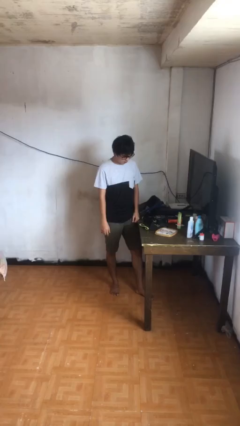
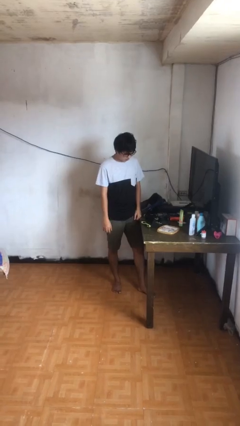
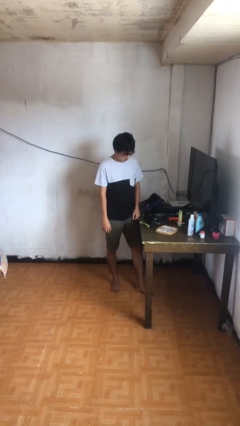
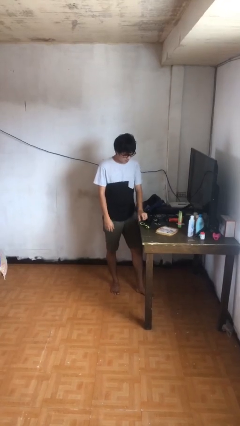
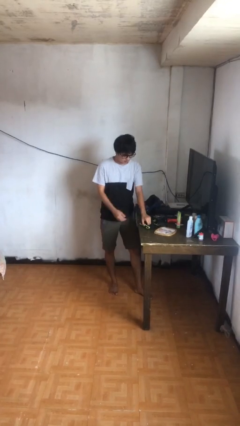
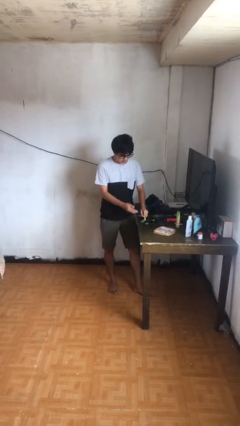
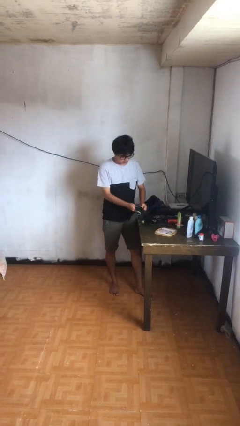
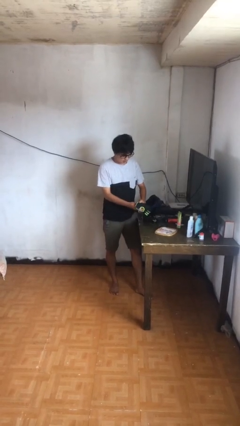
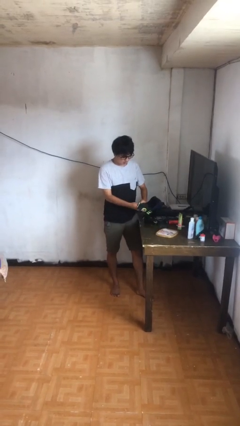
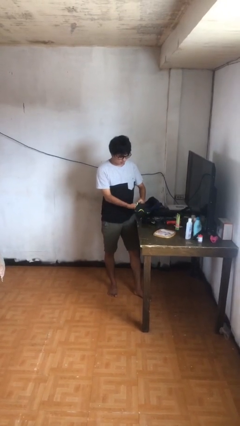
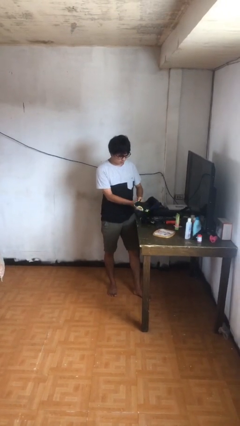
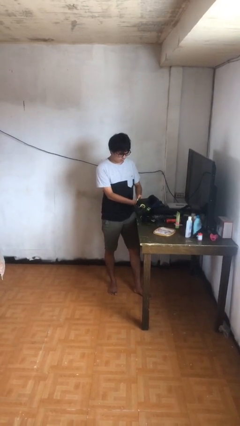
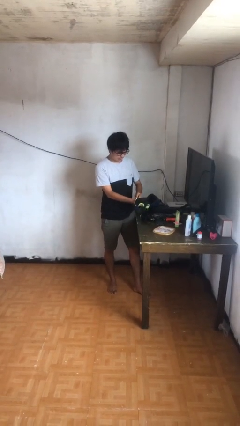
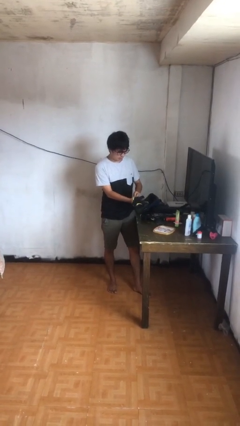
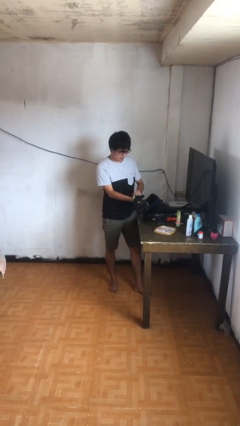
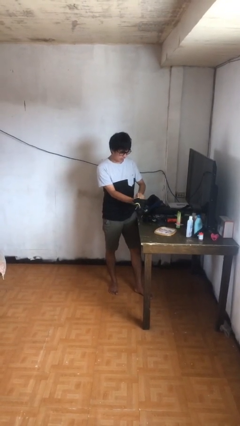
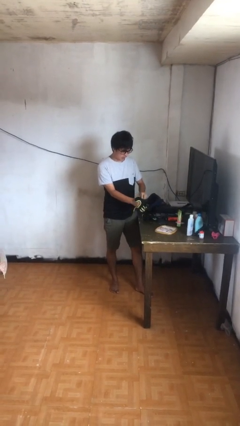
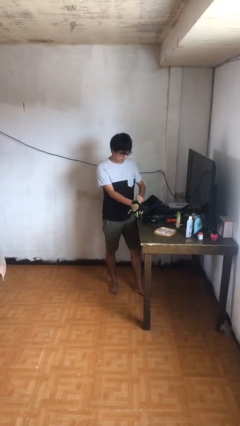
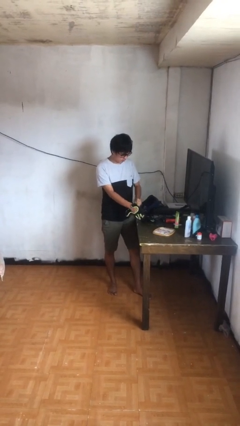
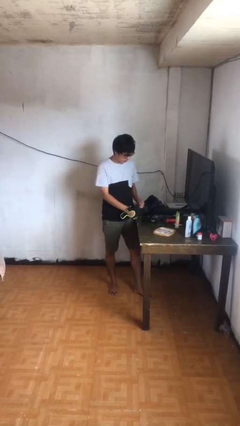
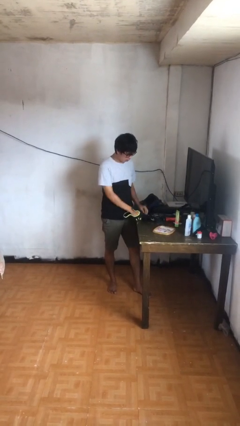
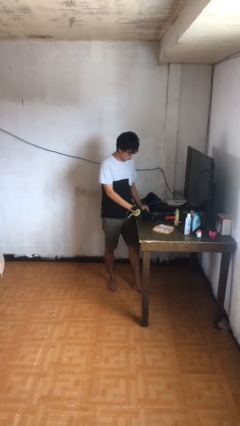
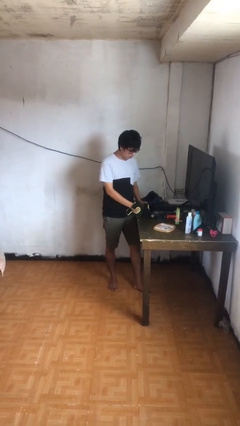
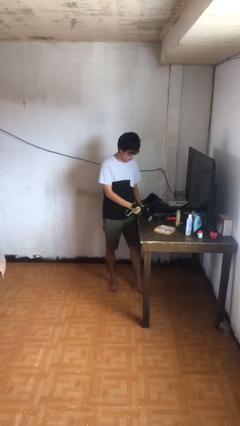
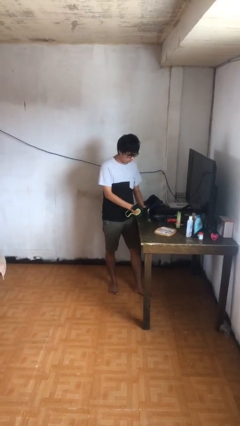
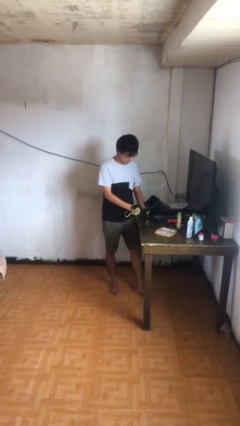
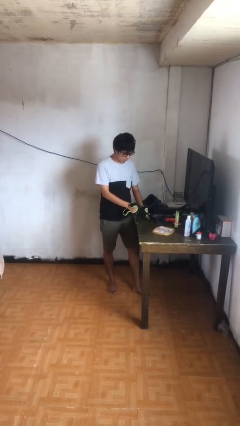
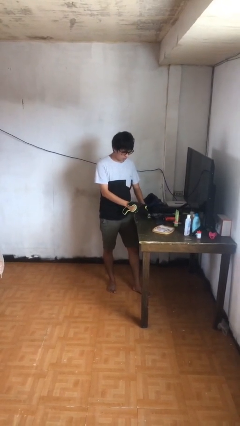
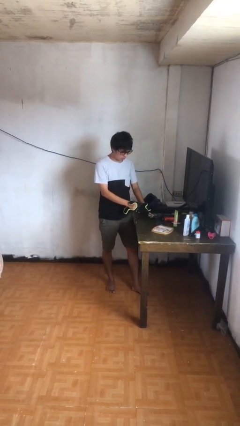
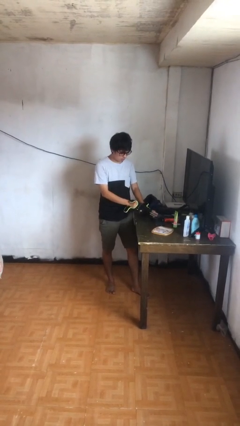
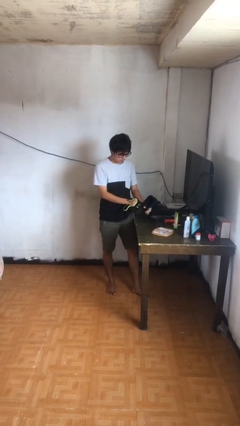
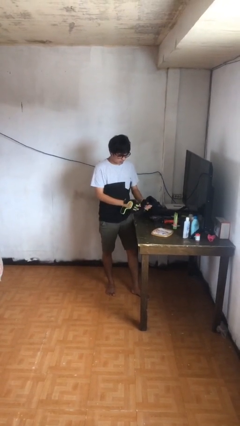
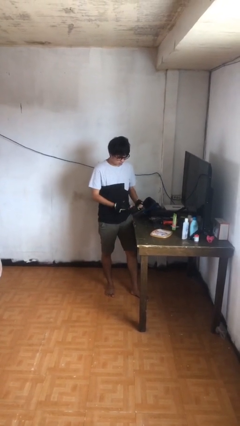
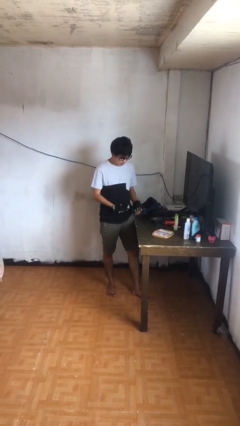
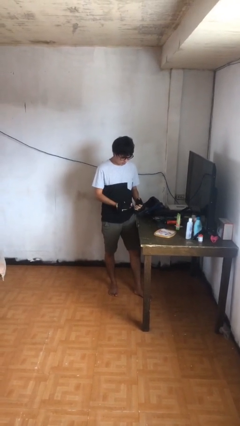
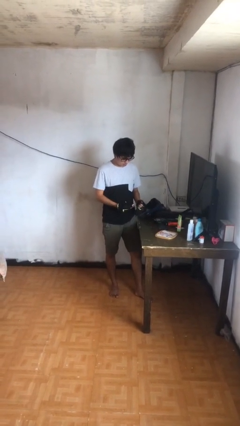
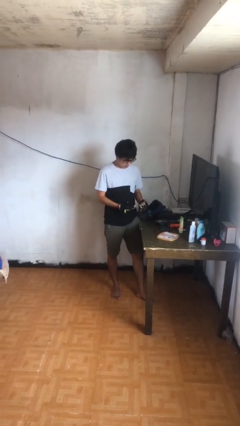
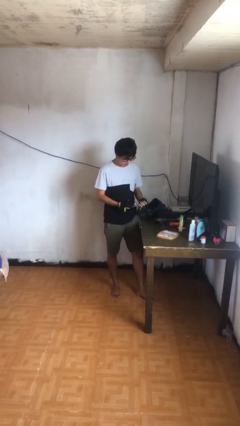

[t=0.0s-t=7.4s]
person puts on gloves

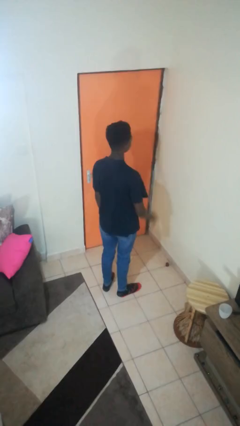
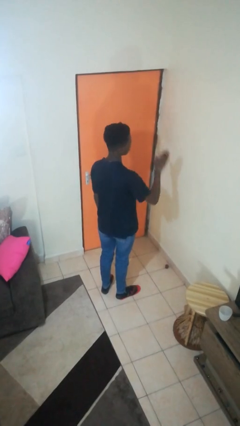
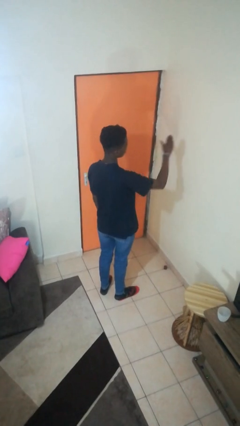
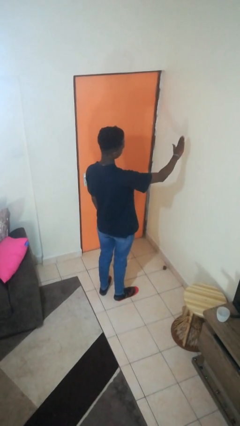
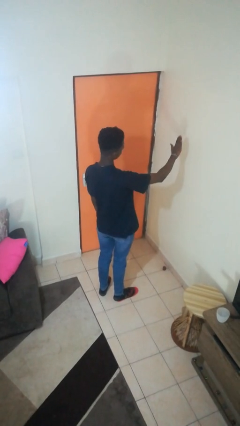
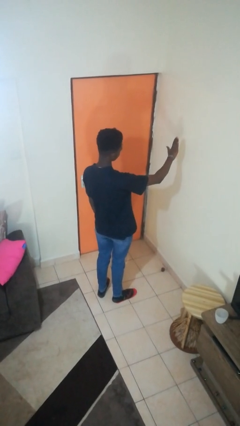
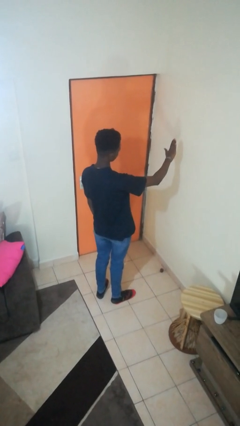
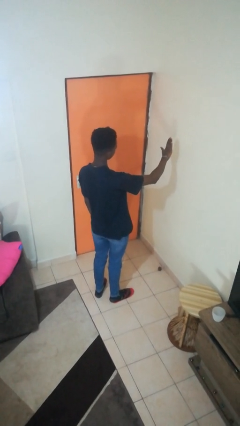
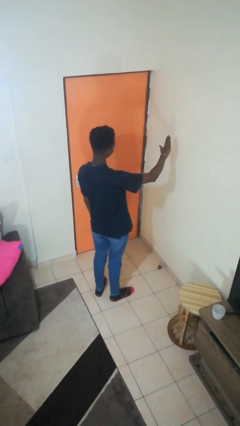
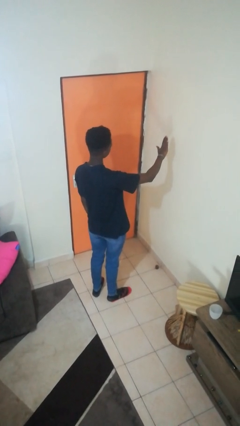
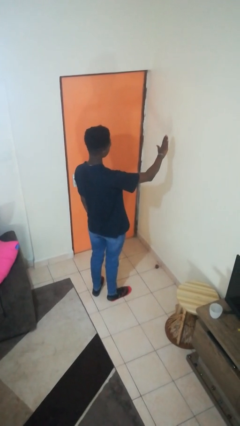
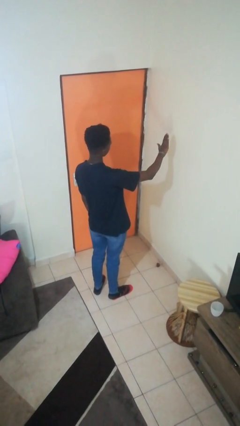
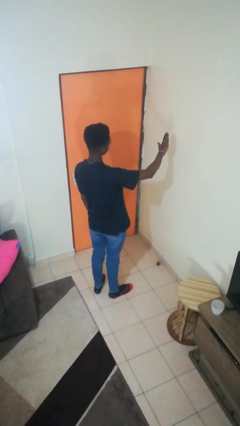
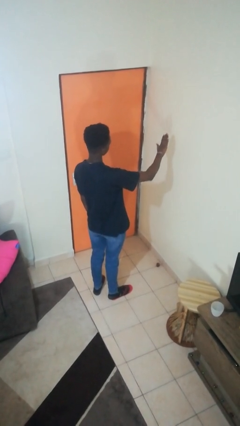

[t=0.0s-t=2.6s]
person gestures stop

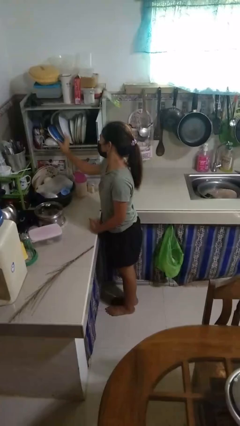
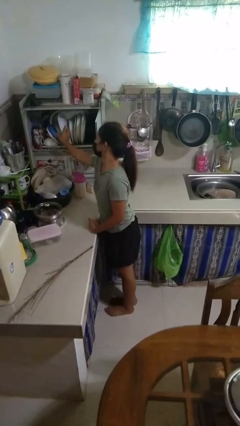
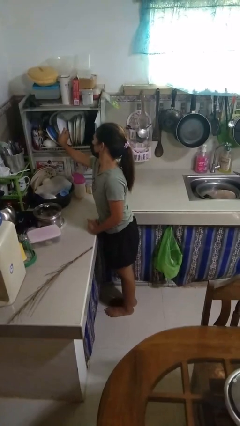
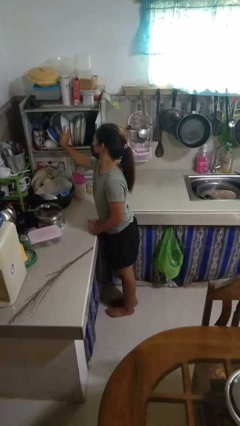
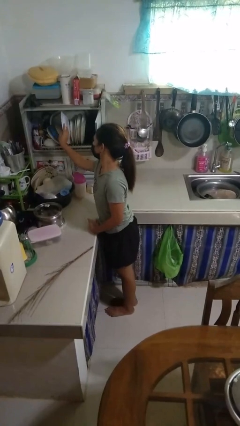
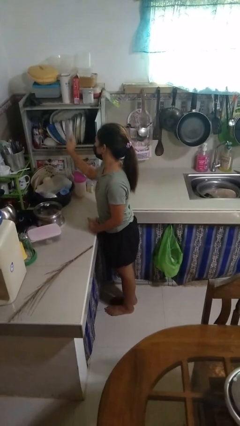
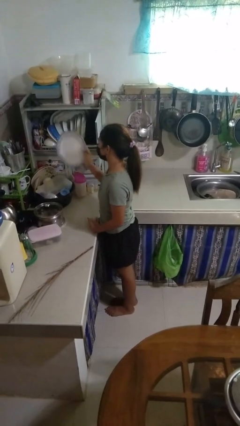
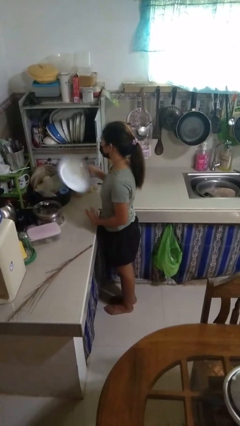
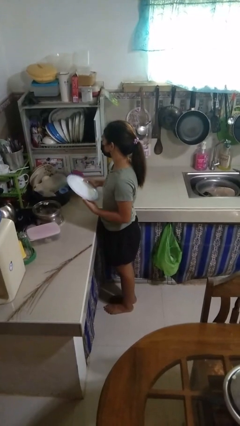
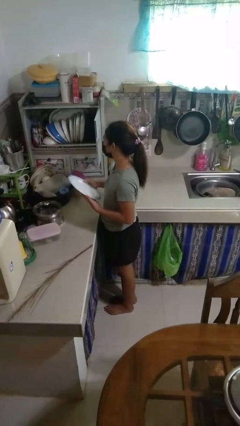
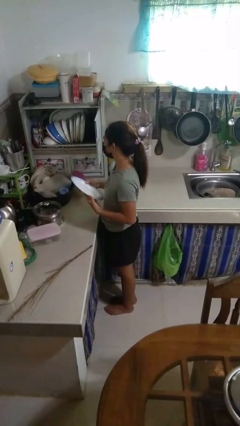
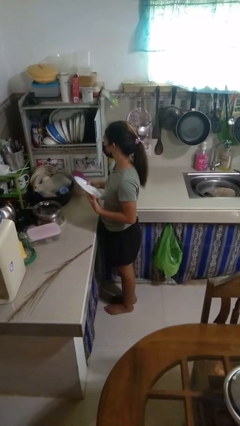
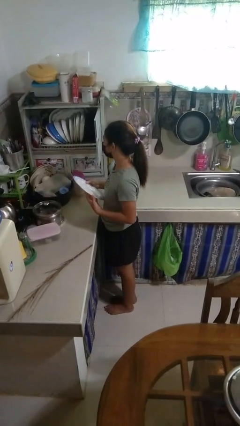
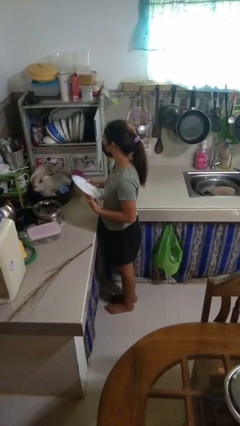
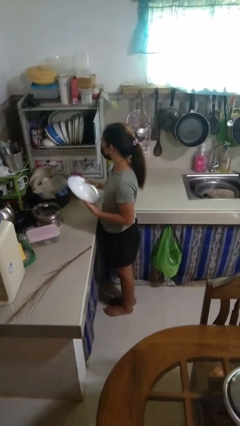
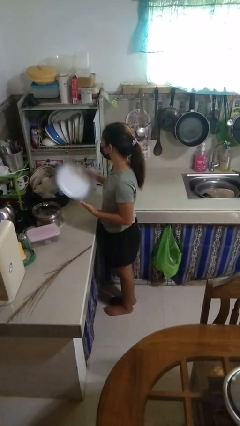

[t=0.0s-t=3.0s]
person takes object from kitchen drawer

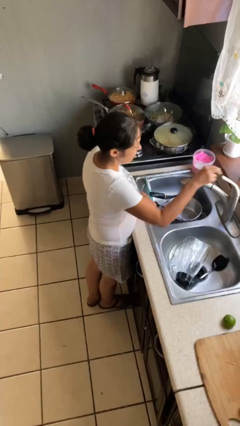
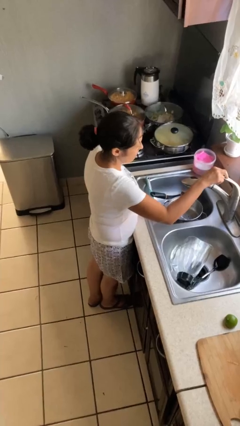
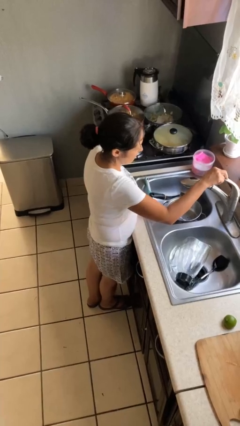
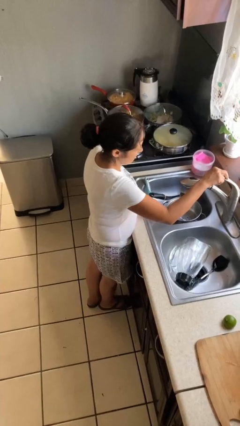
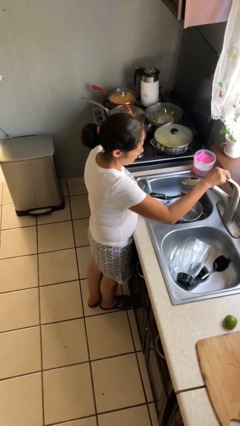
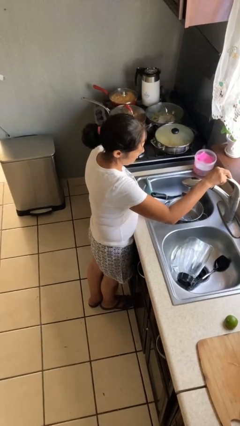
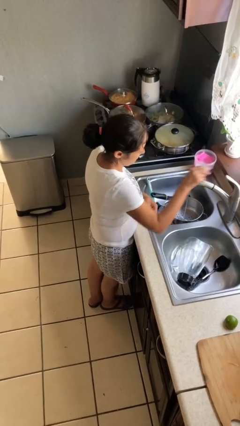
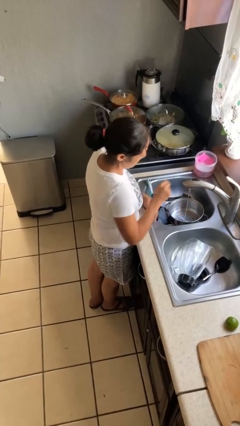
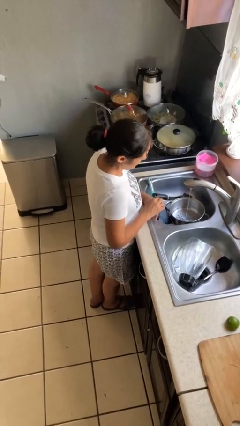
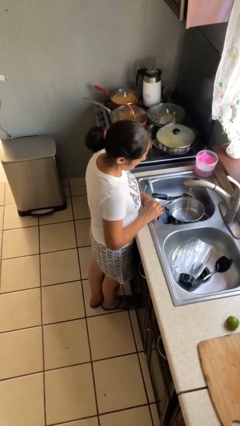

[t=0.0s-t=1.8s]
person turns on faucet

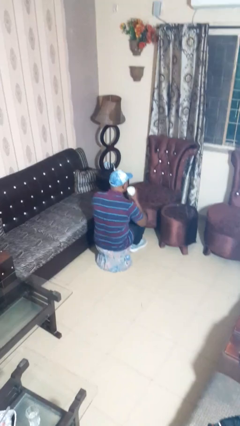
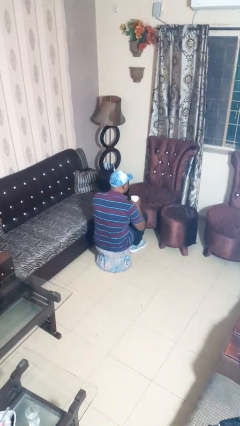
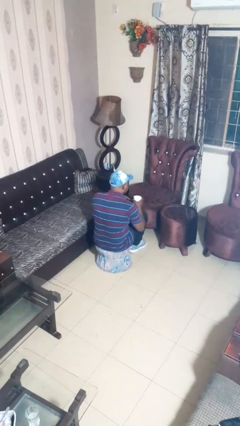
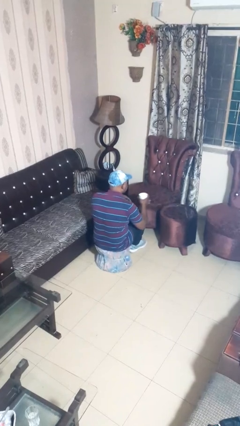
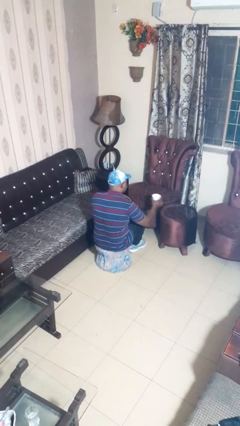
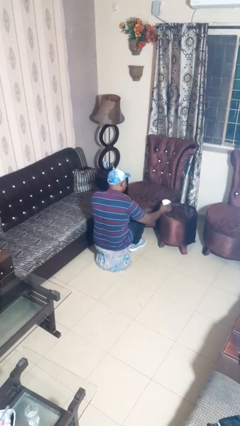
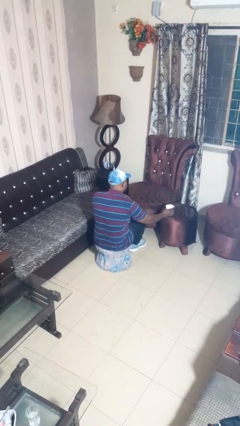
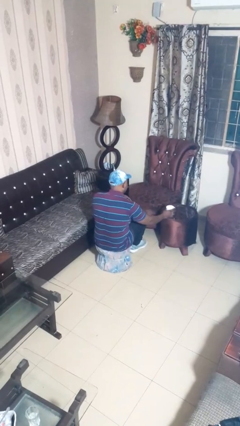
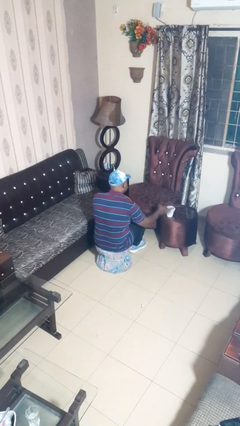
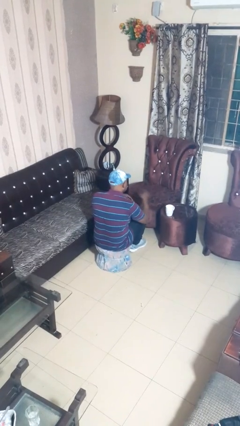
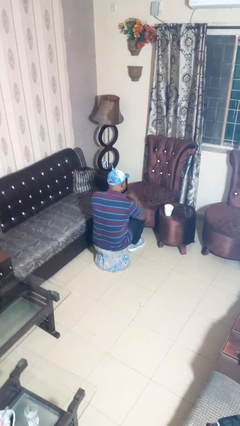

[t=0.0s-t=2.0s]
person puts down object on table

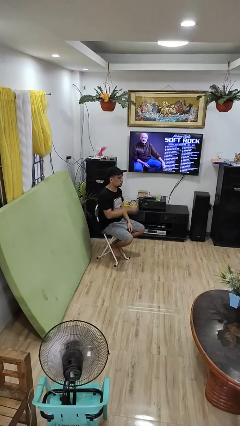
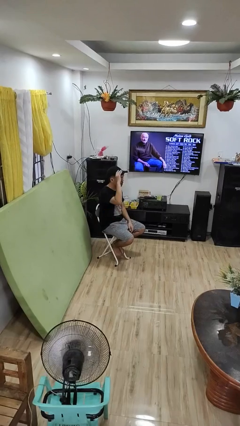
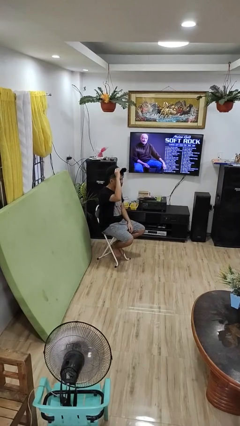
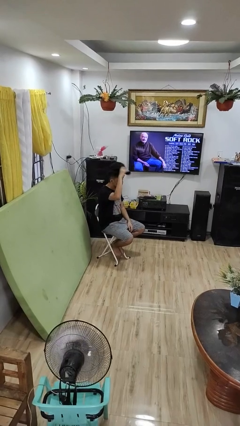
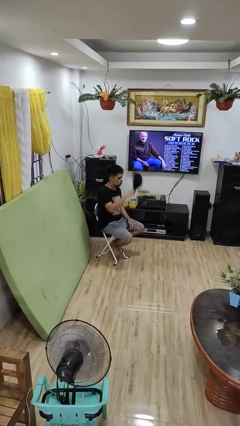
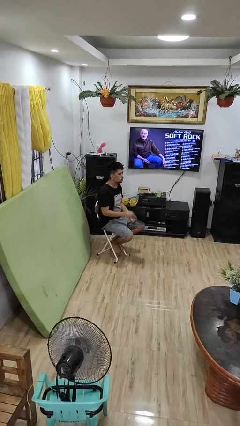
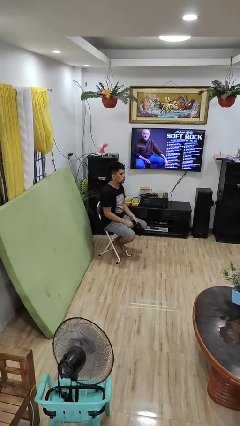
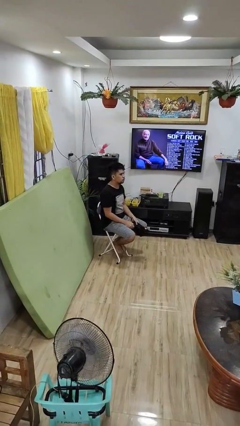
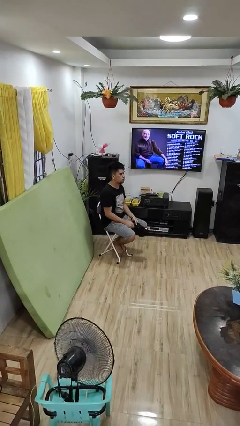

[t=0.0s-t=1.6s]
person takes off hat
